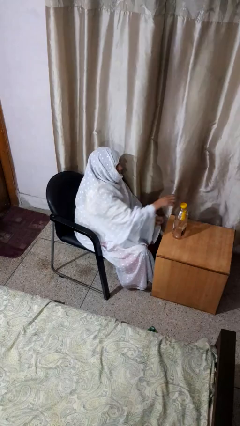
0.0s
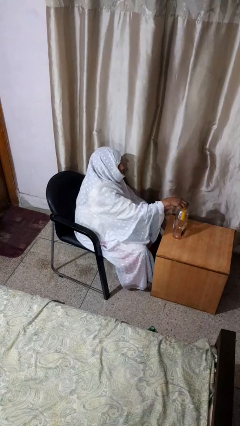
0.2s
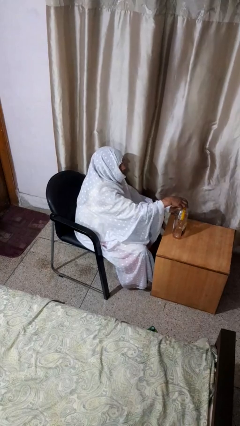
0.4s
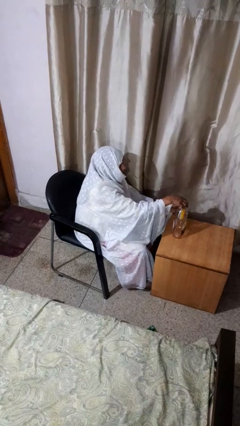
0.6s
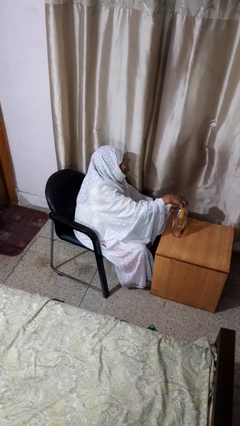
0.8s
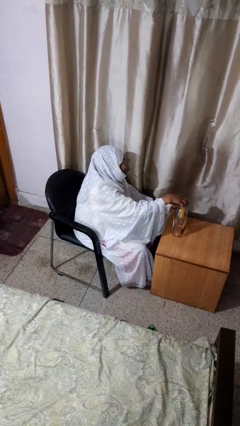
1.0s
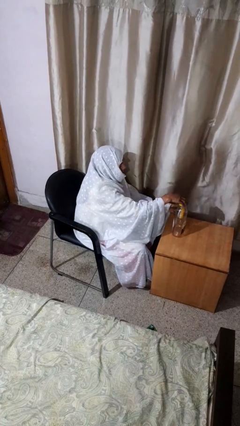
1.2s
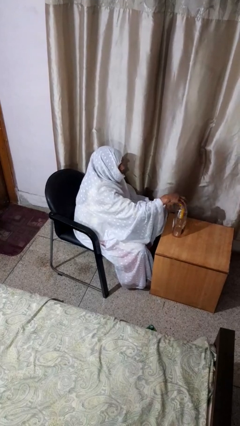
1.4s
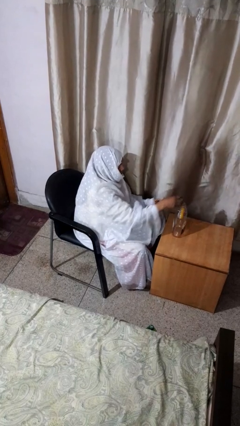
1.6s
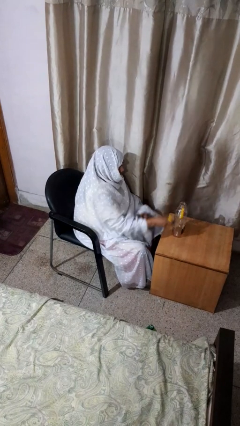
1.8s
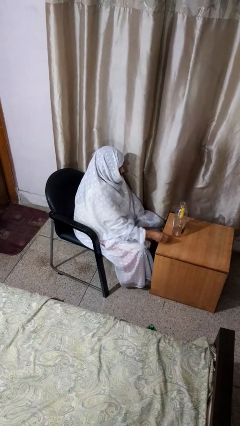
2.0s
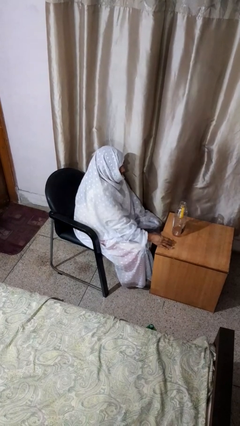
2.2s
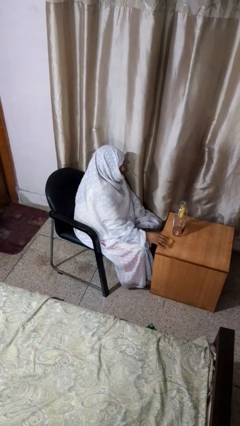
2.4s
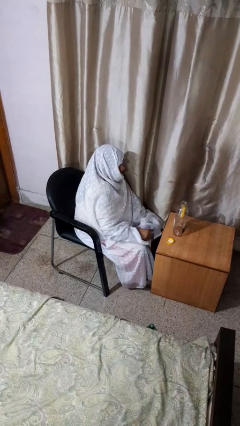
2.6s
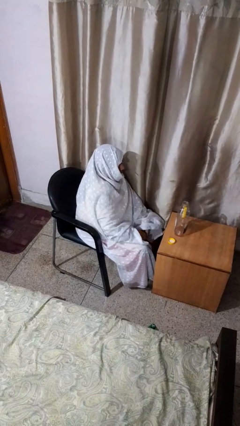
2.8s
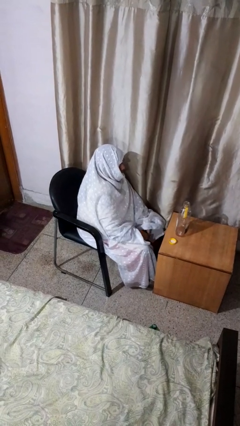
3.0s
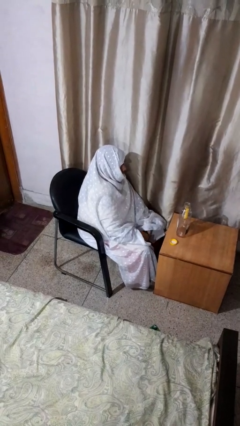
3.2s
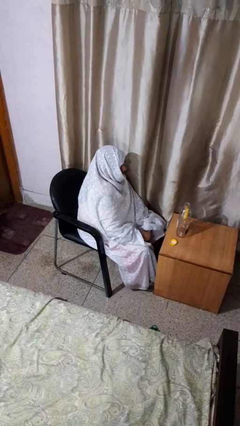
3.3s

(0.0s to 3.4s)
person unscrews lid from bottle

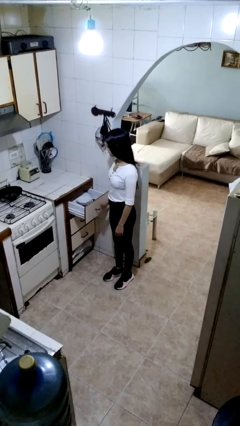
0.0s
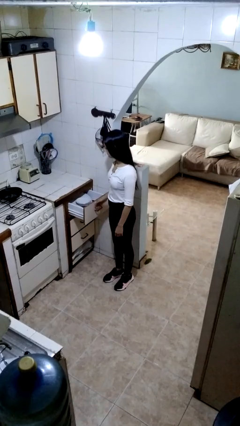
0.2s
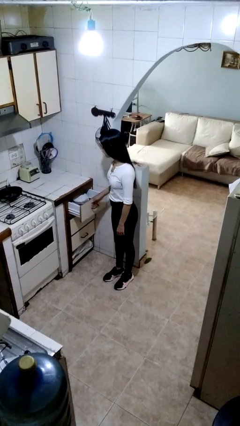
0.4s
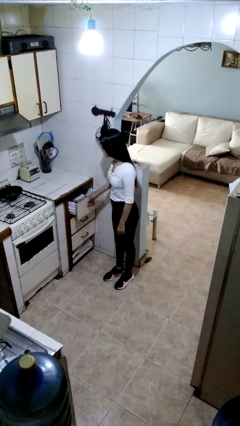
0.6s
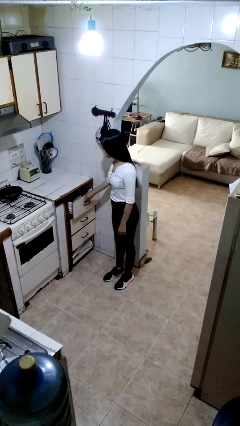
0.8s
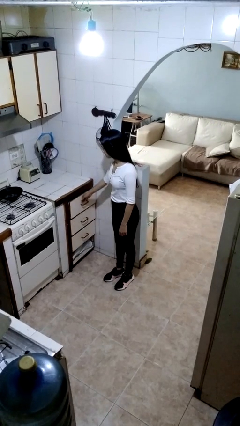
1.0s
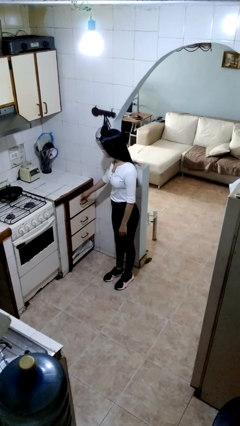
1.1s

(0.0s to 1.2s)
person closes kitchen drawer

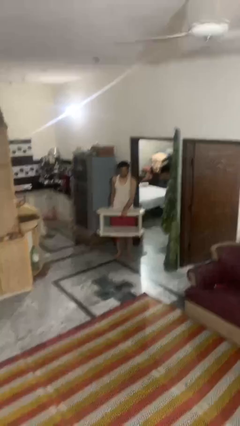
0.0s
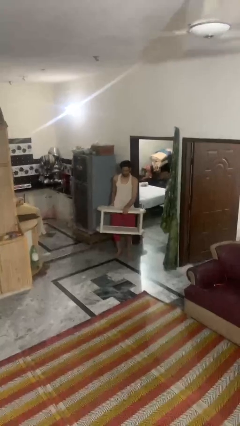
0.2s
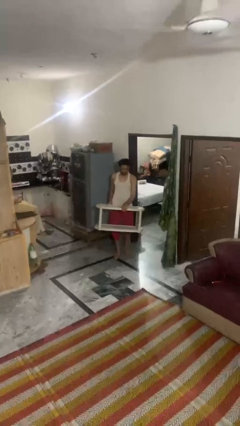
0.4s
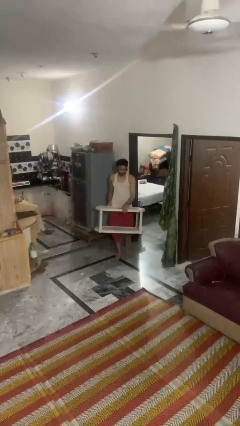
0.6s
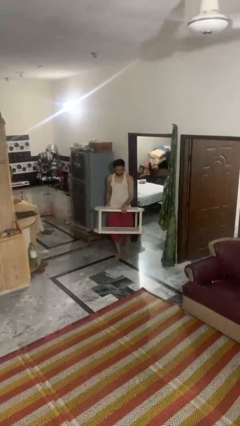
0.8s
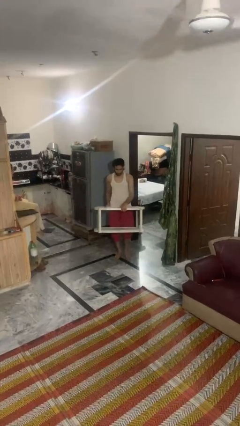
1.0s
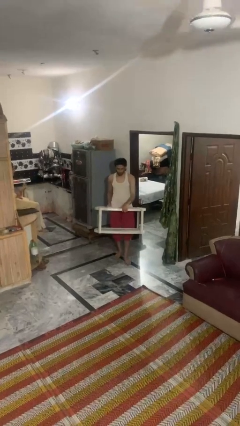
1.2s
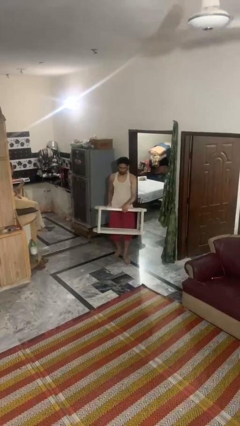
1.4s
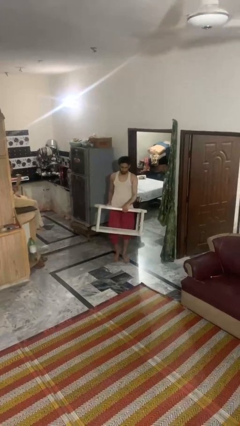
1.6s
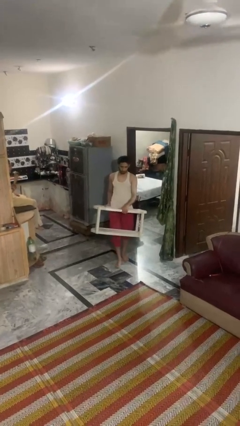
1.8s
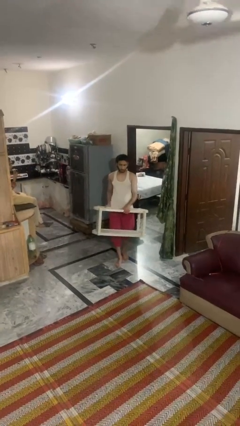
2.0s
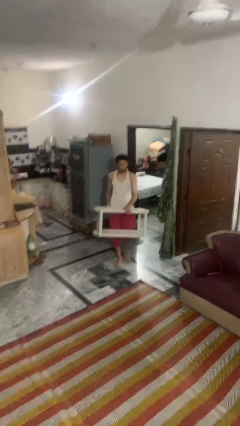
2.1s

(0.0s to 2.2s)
person carries furniture

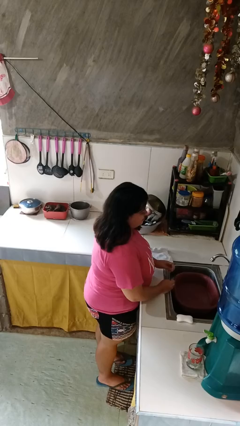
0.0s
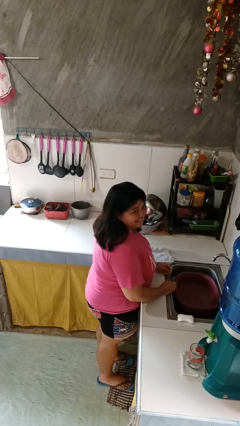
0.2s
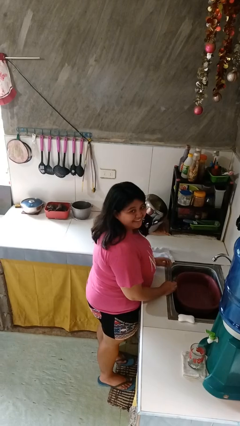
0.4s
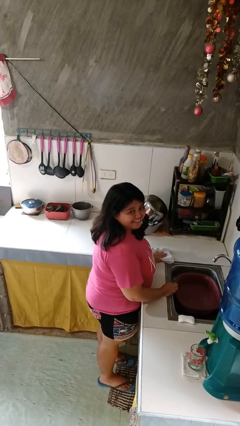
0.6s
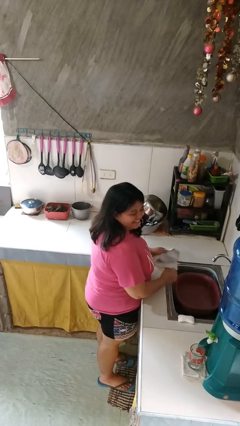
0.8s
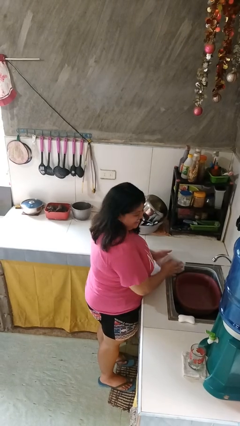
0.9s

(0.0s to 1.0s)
person dries hands with towel

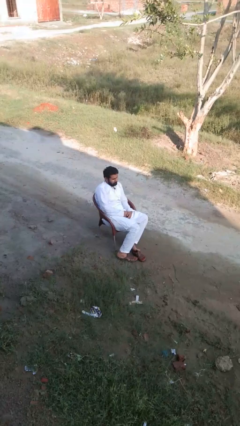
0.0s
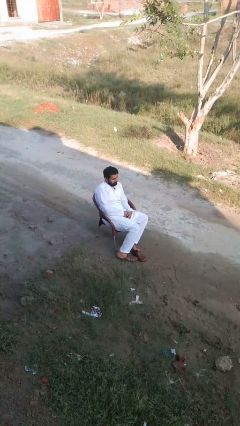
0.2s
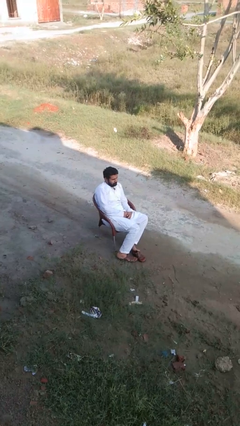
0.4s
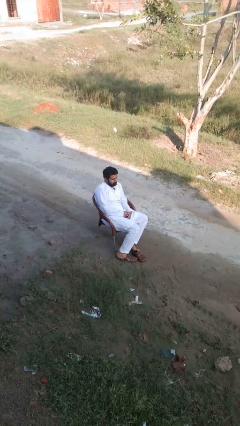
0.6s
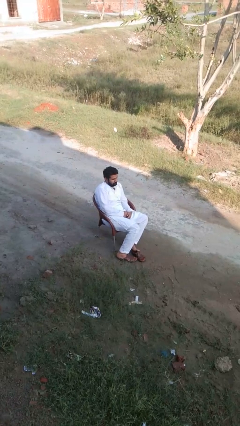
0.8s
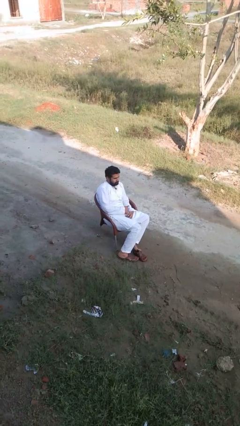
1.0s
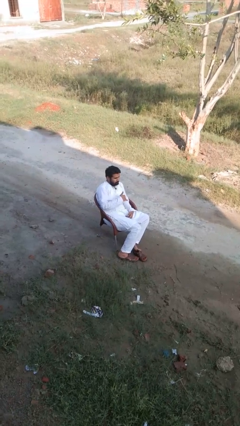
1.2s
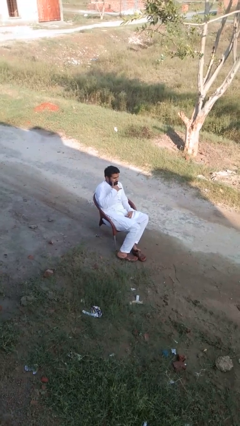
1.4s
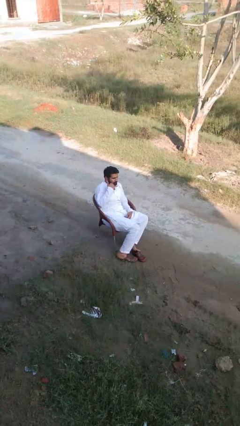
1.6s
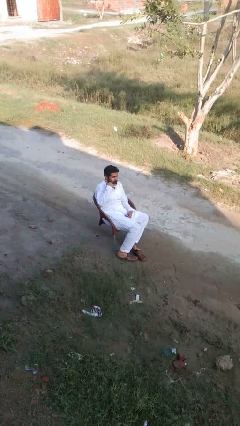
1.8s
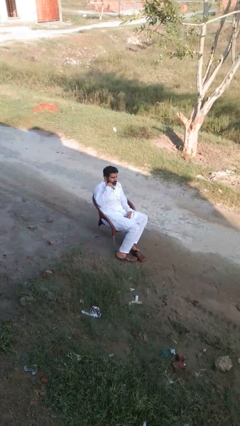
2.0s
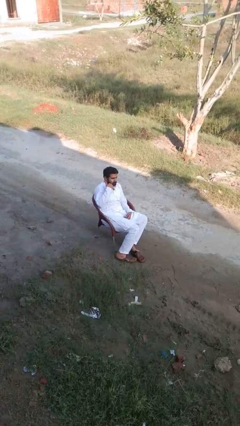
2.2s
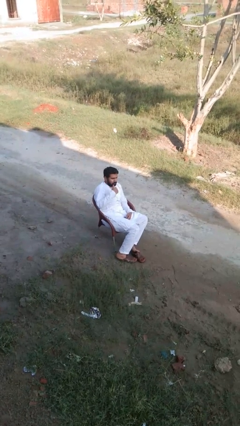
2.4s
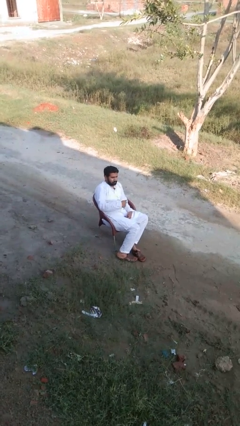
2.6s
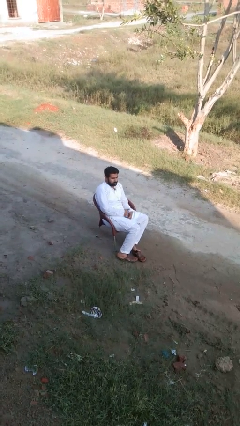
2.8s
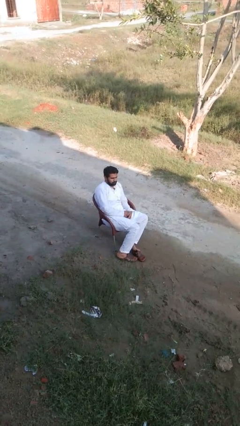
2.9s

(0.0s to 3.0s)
person gestures call me

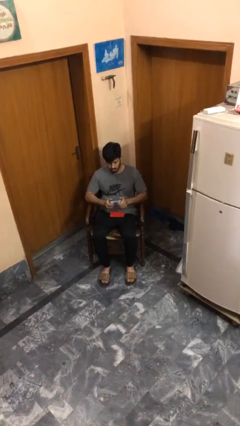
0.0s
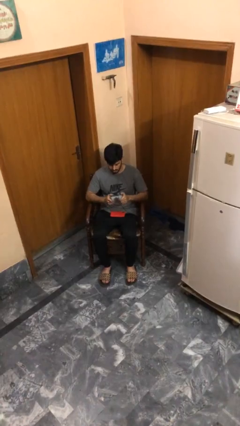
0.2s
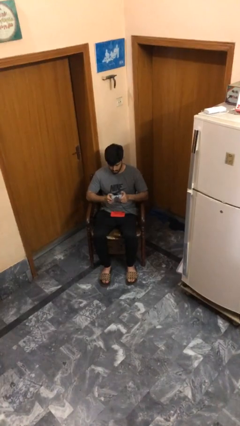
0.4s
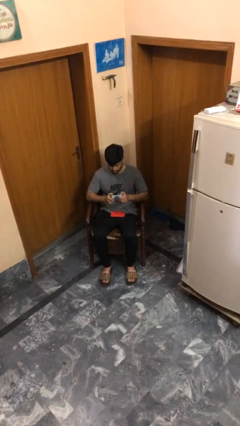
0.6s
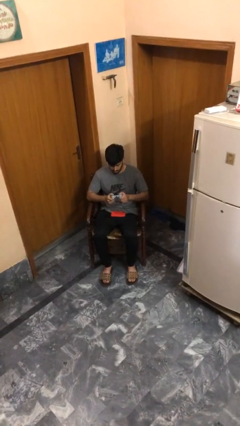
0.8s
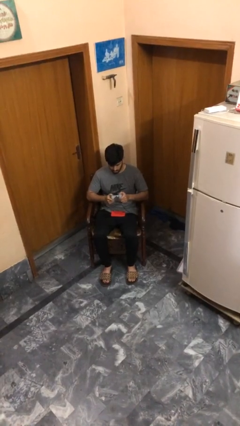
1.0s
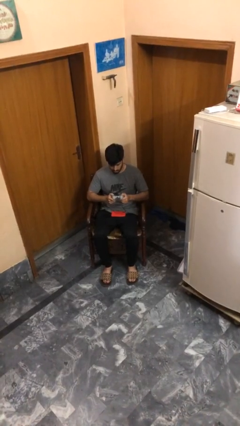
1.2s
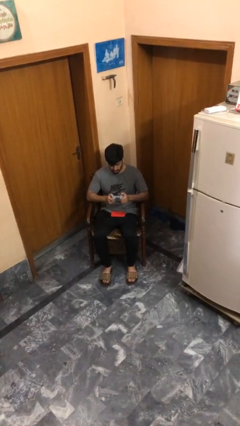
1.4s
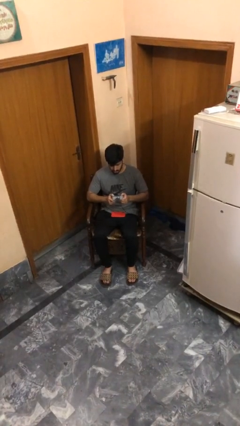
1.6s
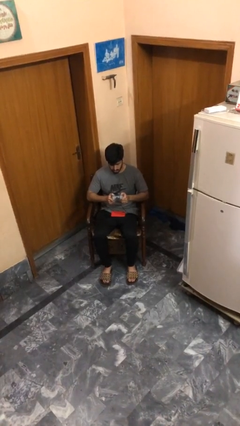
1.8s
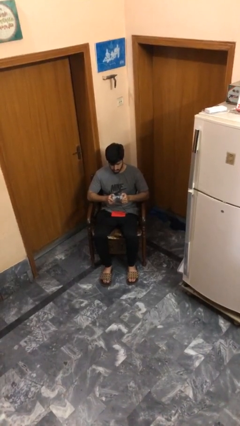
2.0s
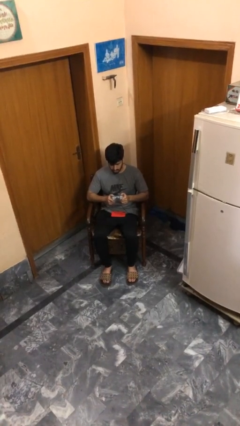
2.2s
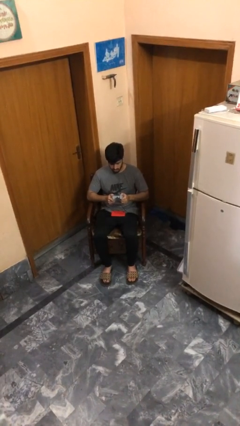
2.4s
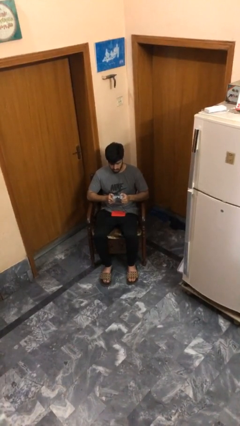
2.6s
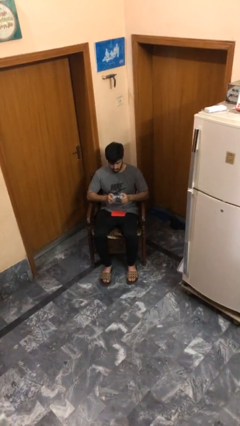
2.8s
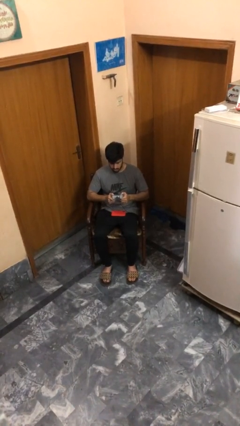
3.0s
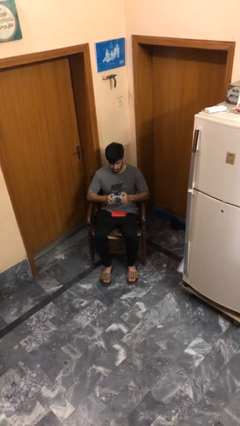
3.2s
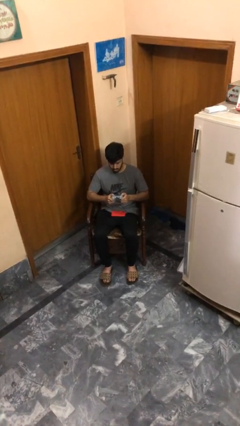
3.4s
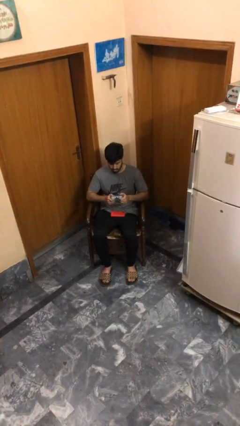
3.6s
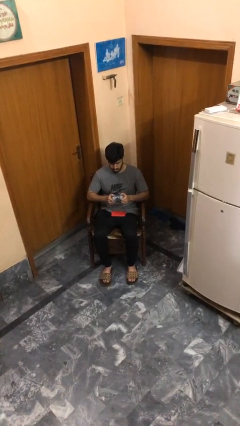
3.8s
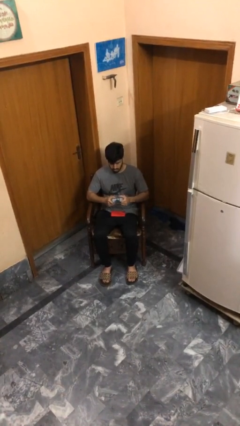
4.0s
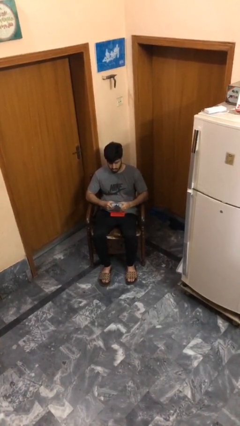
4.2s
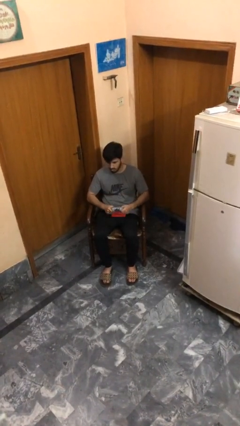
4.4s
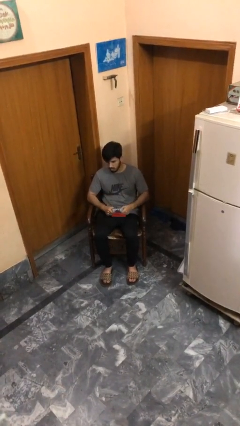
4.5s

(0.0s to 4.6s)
person interacts with handheld game

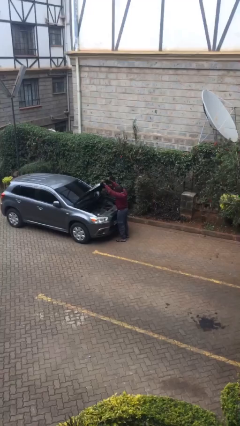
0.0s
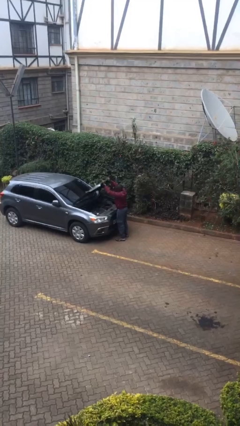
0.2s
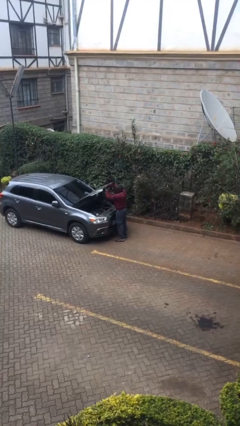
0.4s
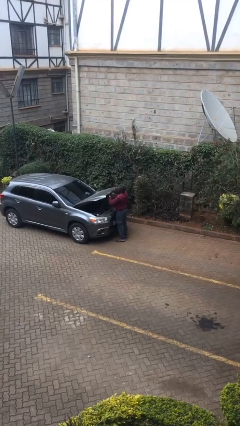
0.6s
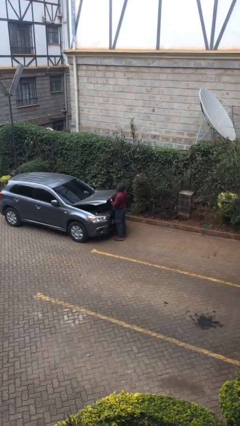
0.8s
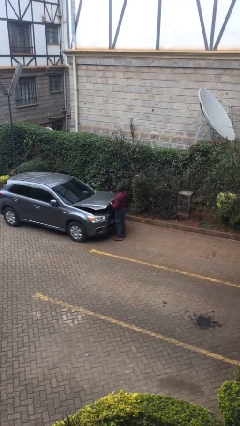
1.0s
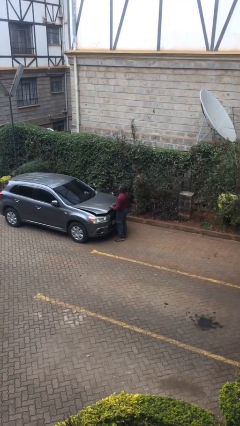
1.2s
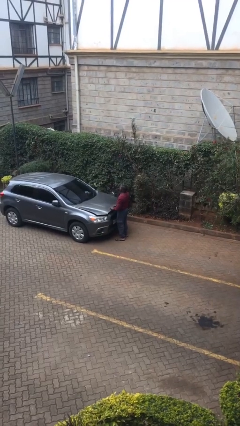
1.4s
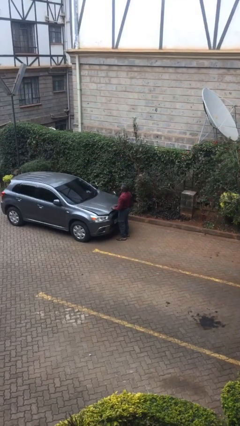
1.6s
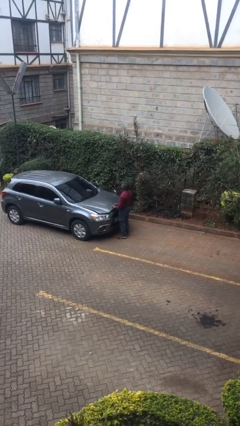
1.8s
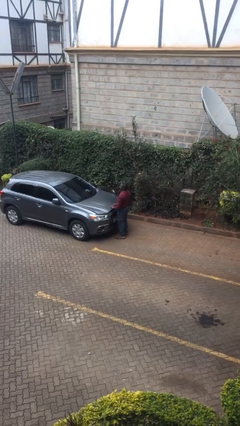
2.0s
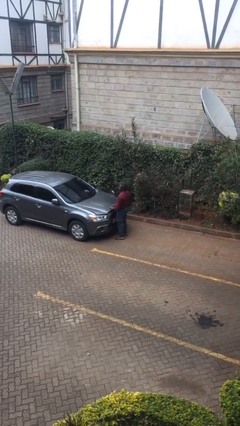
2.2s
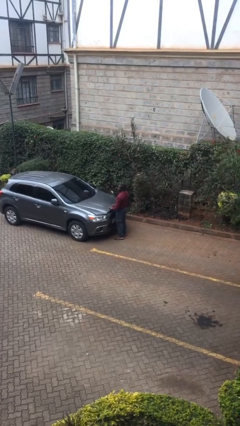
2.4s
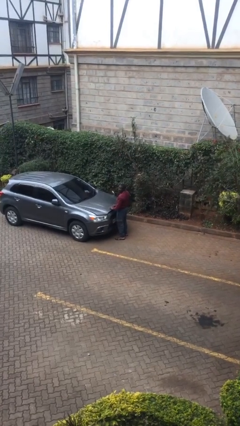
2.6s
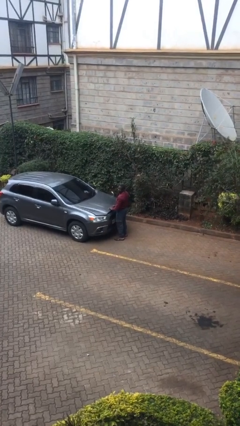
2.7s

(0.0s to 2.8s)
person closes car hood
